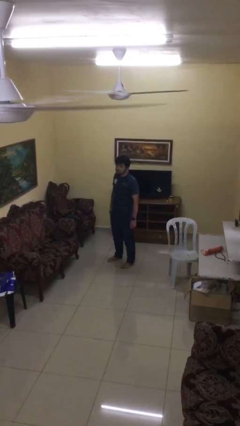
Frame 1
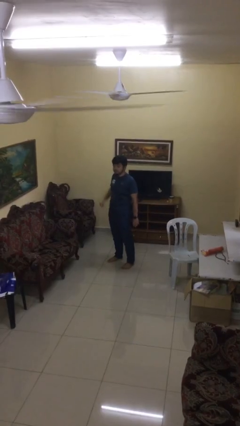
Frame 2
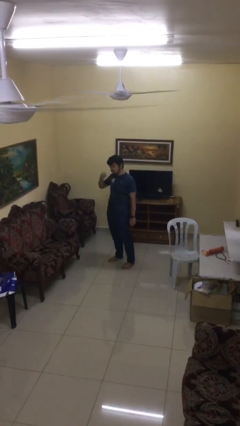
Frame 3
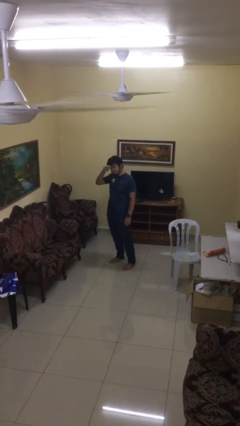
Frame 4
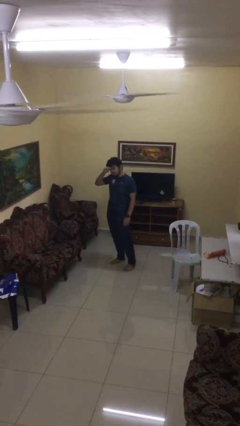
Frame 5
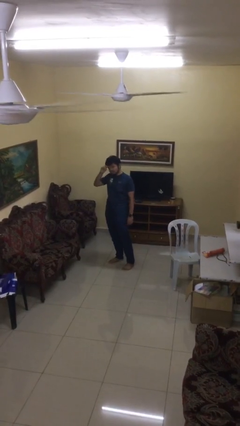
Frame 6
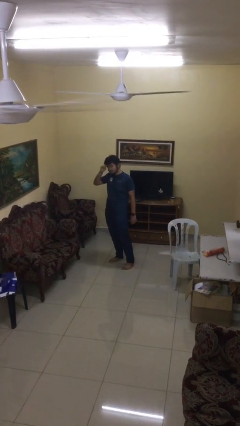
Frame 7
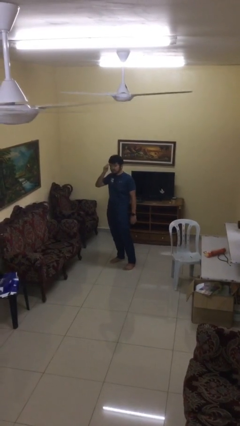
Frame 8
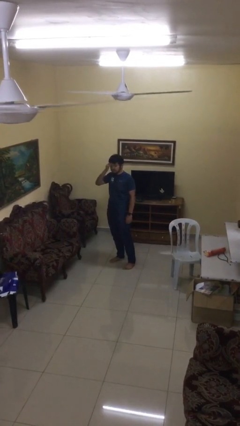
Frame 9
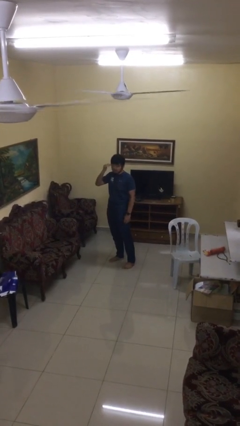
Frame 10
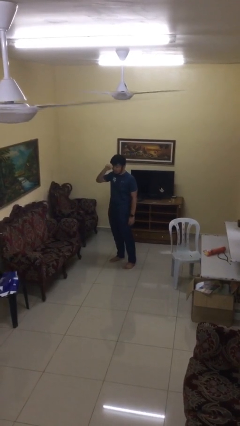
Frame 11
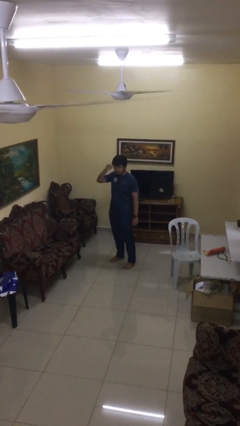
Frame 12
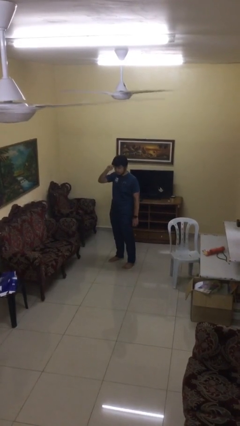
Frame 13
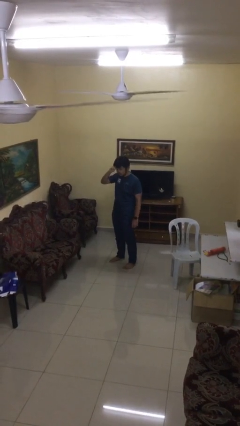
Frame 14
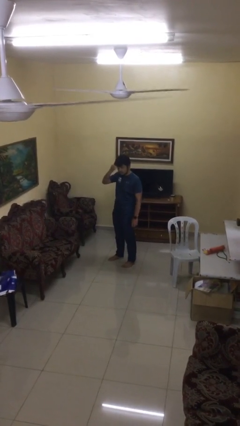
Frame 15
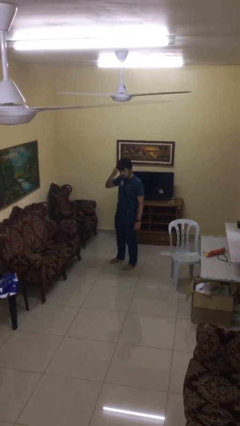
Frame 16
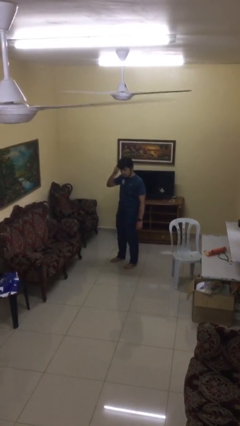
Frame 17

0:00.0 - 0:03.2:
person scratches face

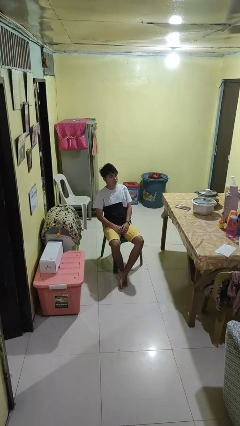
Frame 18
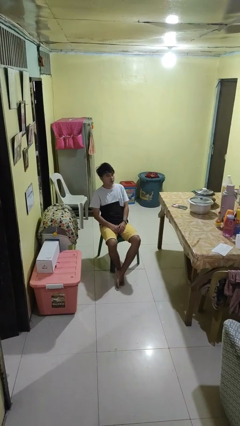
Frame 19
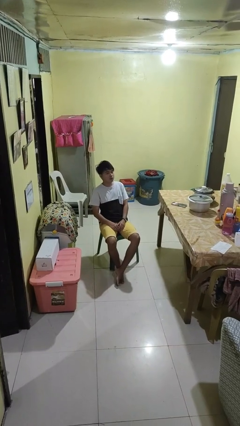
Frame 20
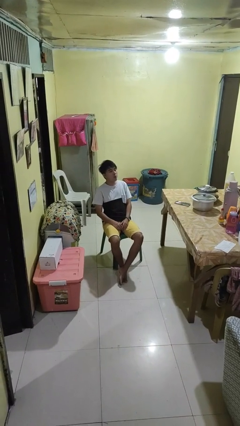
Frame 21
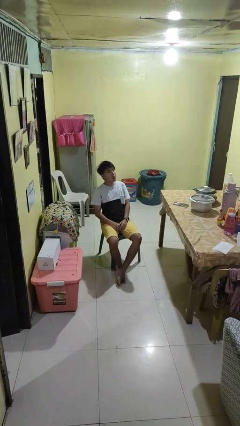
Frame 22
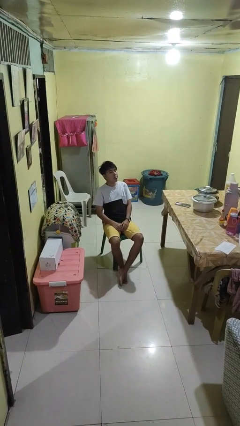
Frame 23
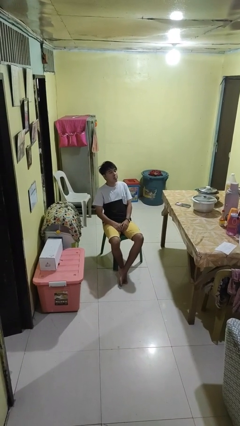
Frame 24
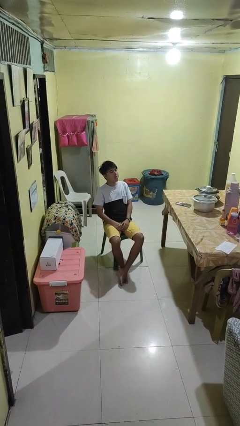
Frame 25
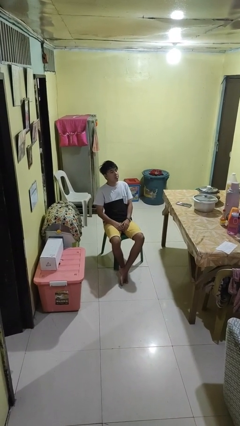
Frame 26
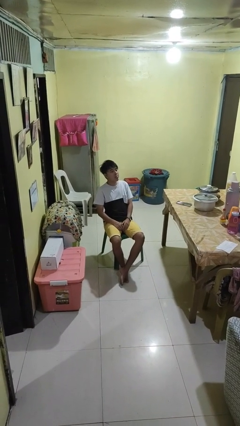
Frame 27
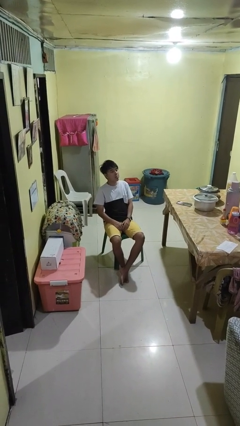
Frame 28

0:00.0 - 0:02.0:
person sticks out tongue

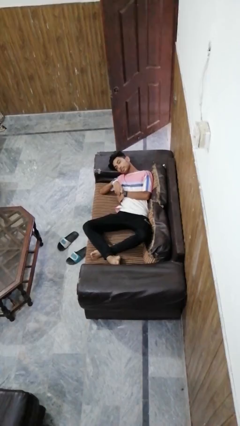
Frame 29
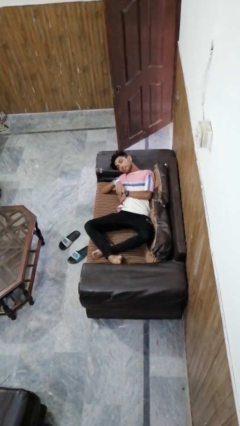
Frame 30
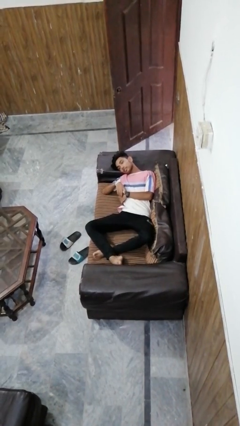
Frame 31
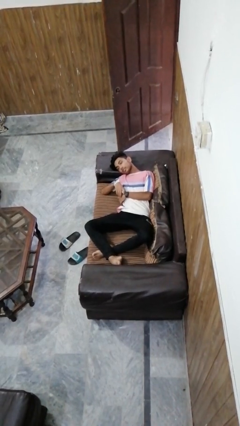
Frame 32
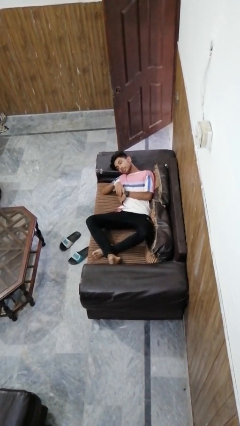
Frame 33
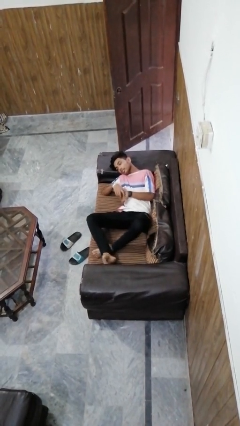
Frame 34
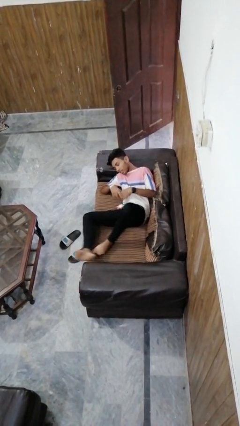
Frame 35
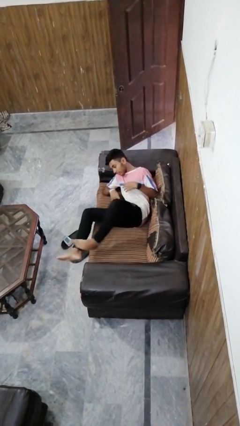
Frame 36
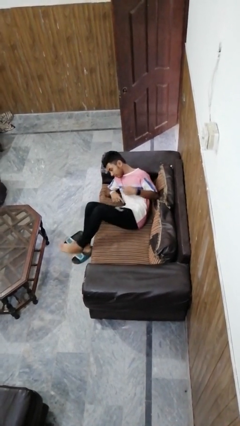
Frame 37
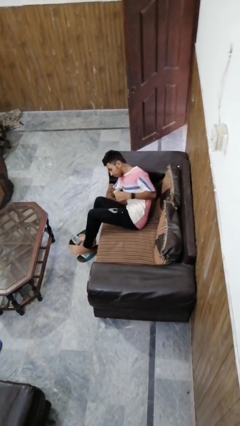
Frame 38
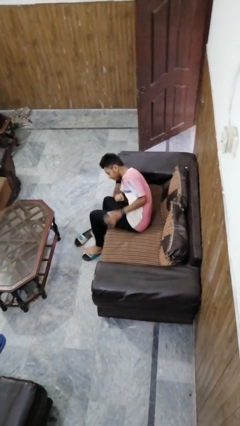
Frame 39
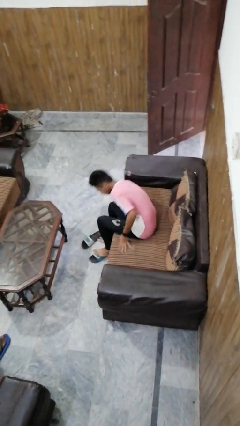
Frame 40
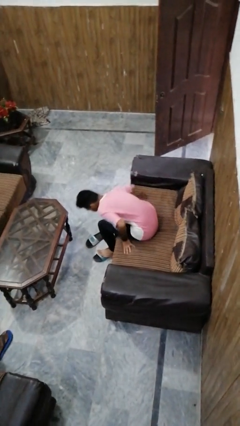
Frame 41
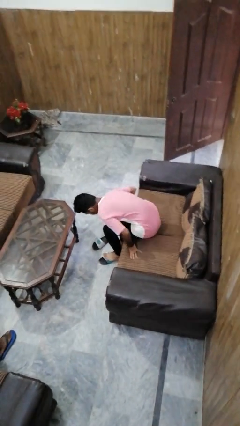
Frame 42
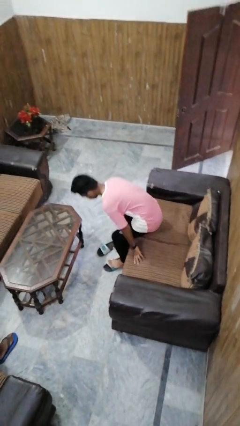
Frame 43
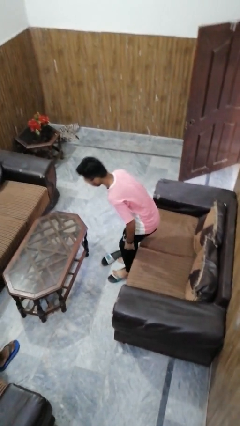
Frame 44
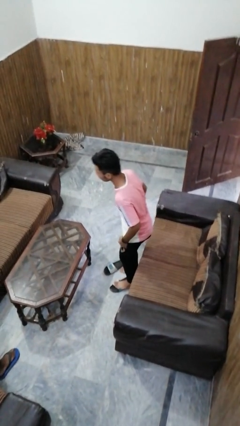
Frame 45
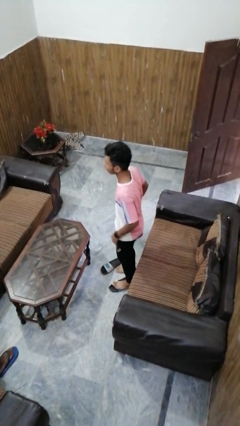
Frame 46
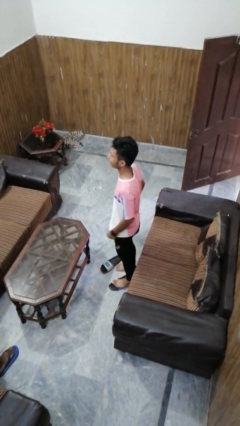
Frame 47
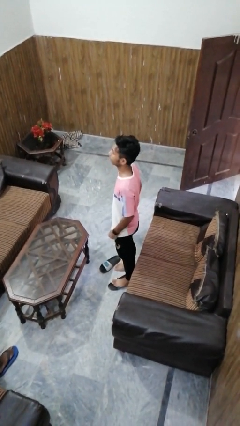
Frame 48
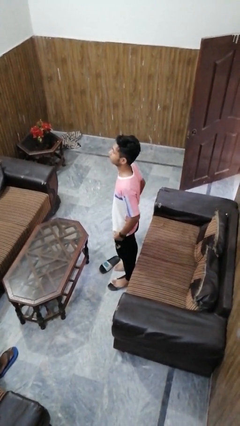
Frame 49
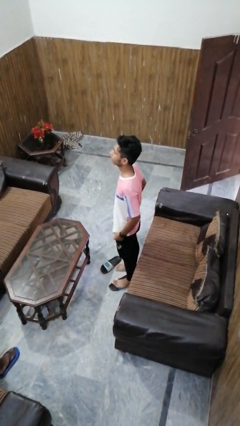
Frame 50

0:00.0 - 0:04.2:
person stands up

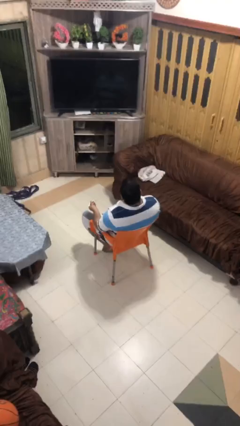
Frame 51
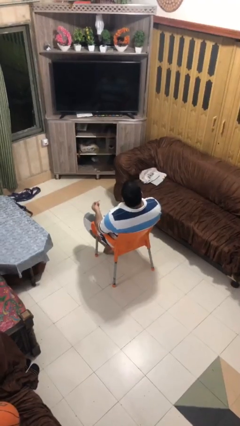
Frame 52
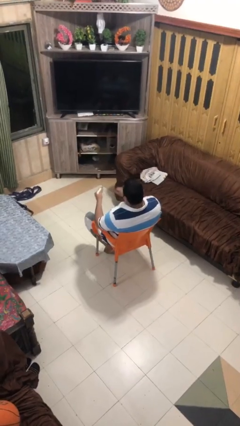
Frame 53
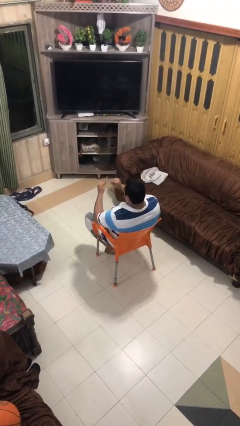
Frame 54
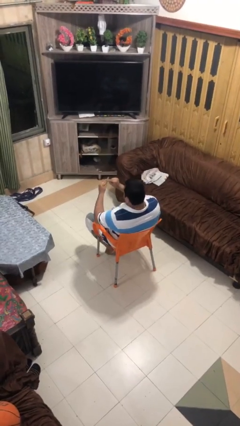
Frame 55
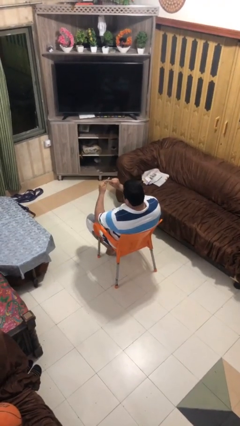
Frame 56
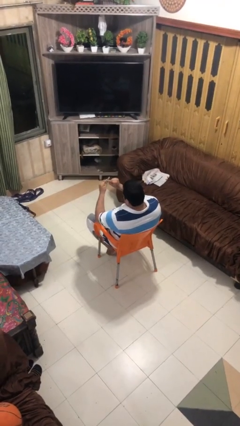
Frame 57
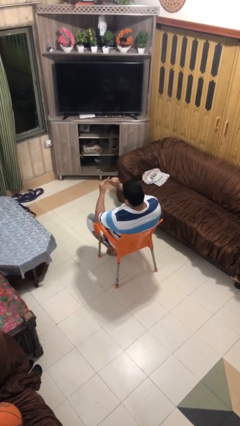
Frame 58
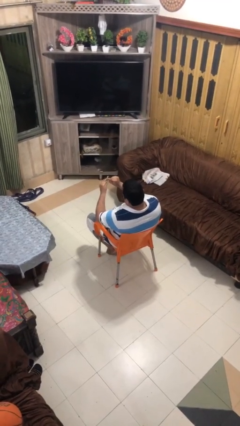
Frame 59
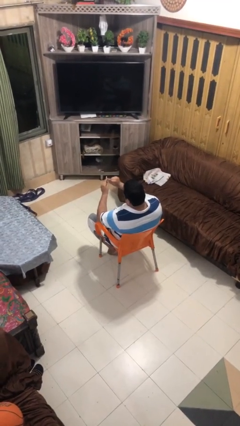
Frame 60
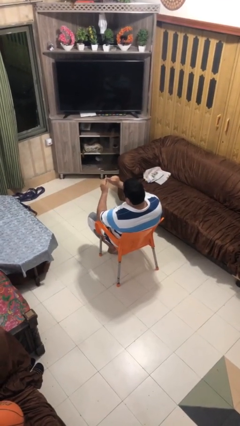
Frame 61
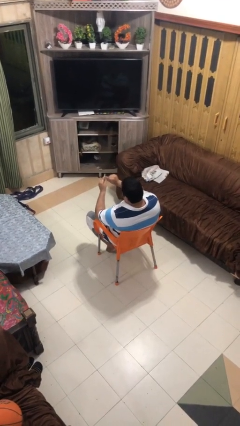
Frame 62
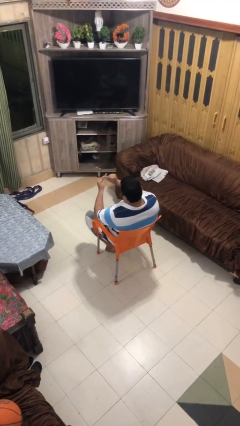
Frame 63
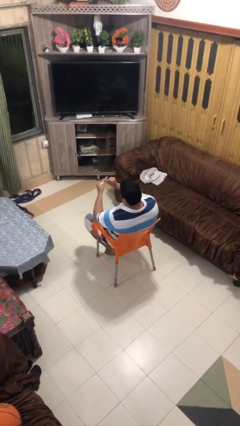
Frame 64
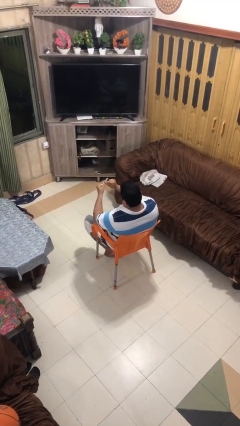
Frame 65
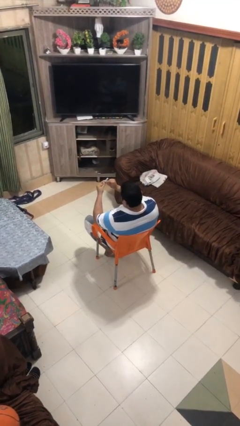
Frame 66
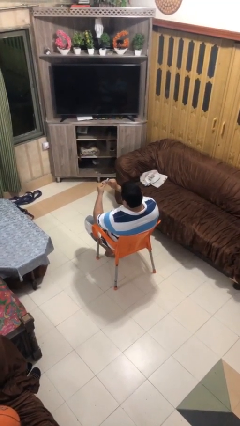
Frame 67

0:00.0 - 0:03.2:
person files fingernails

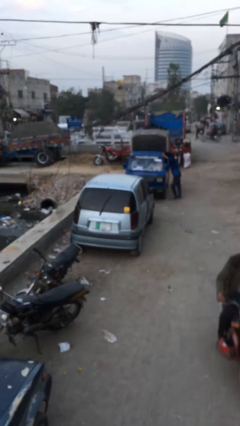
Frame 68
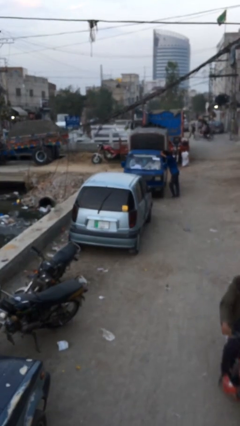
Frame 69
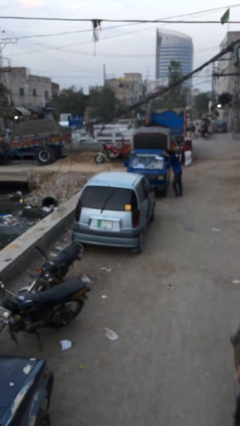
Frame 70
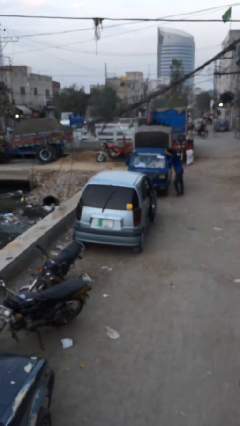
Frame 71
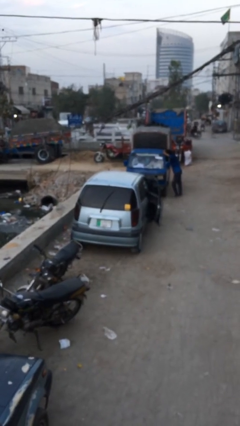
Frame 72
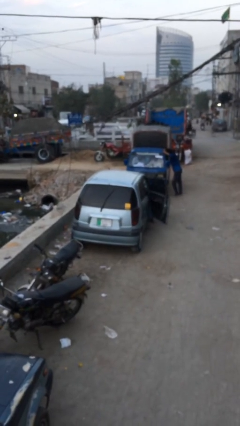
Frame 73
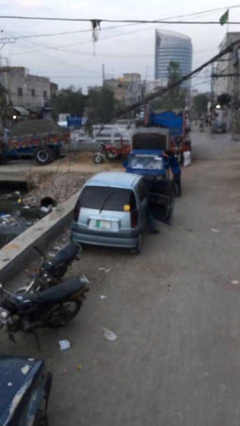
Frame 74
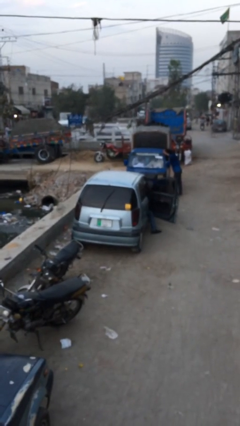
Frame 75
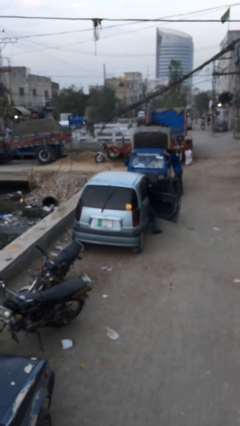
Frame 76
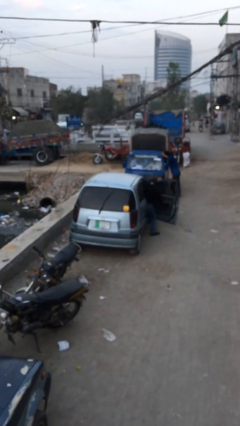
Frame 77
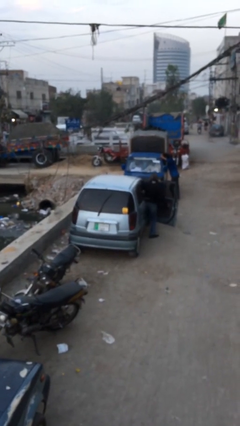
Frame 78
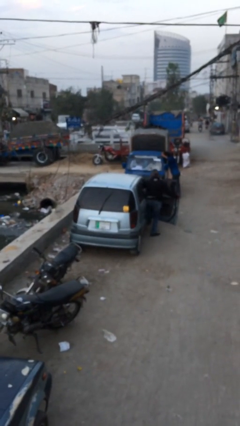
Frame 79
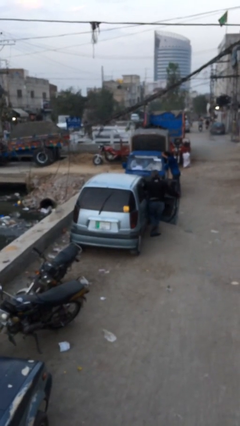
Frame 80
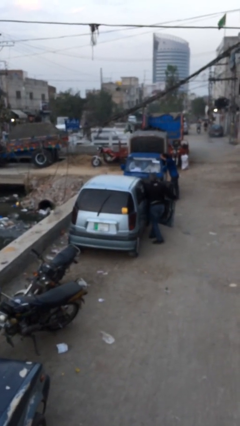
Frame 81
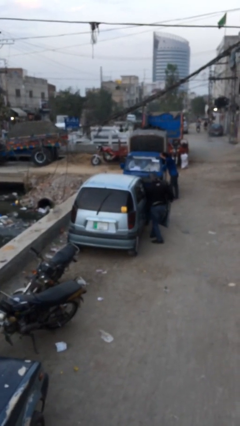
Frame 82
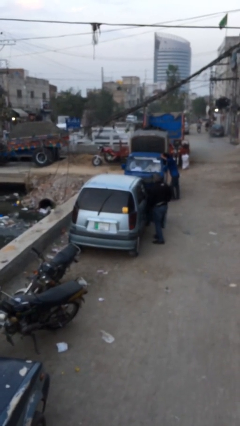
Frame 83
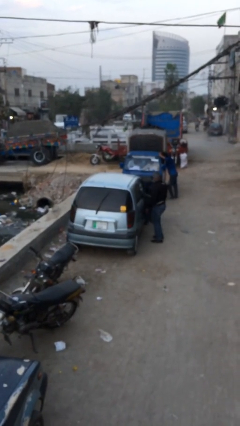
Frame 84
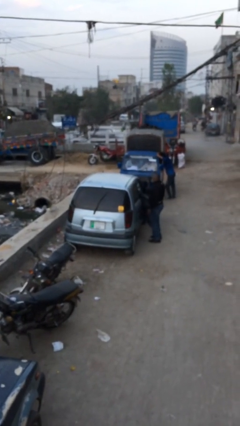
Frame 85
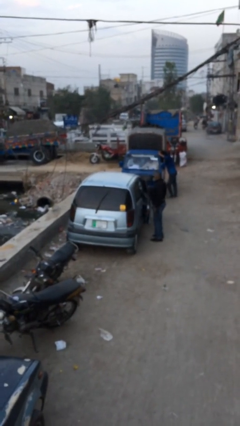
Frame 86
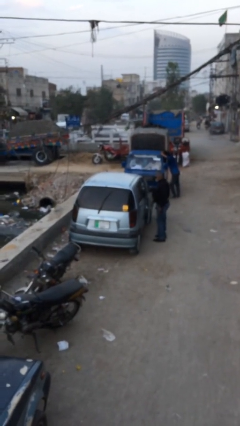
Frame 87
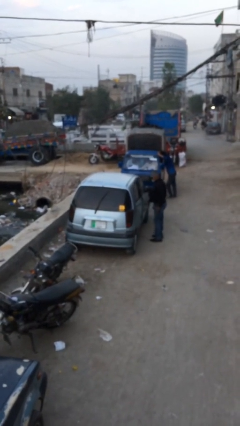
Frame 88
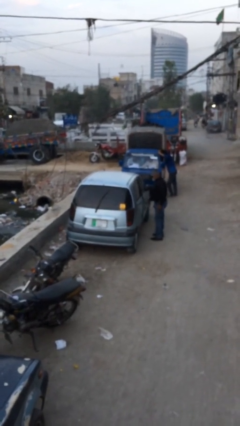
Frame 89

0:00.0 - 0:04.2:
car drops off person

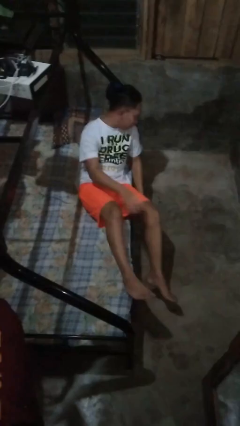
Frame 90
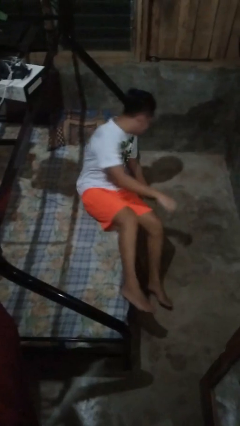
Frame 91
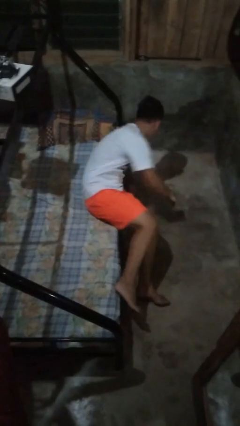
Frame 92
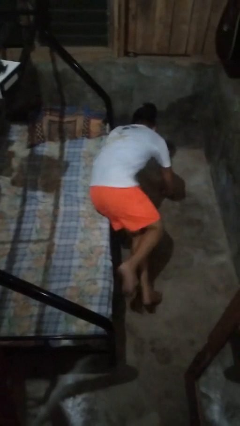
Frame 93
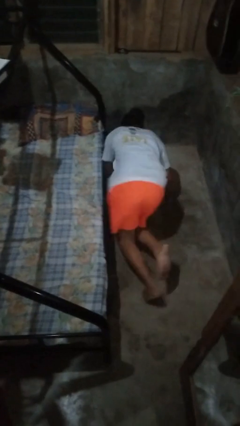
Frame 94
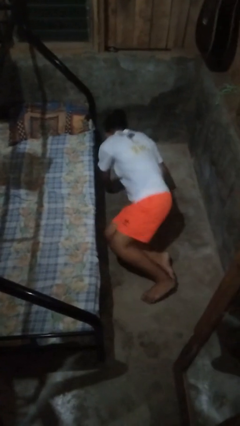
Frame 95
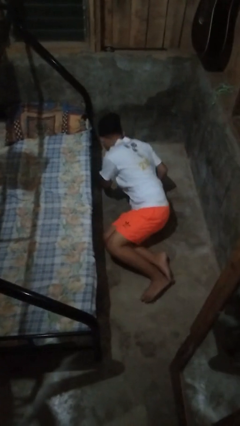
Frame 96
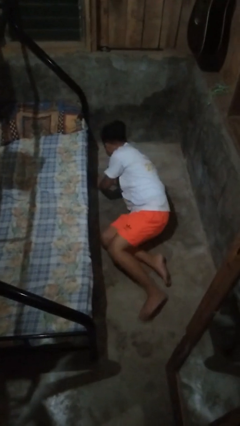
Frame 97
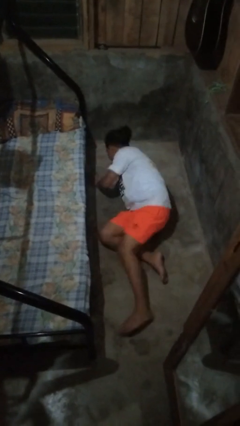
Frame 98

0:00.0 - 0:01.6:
person falls from bed
